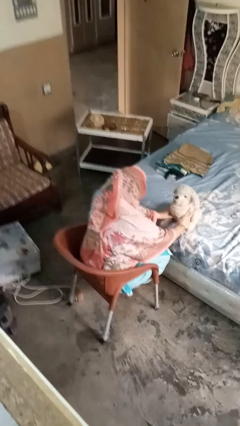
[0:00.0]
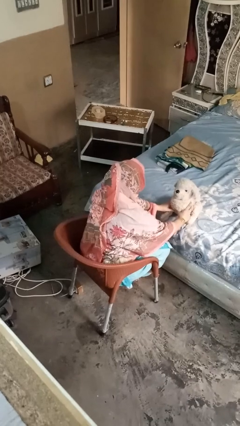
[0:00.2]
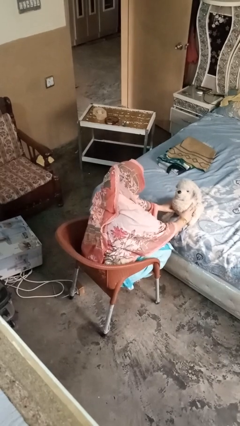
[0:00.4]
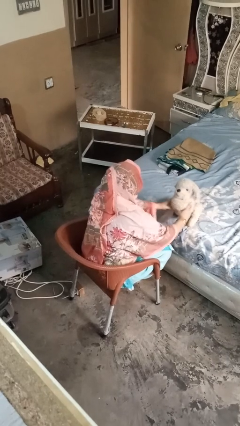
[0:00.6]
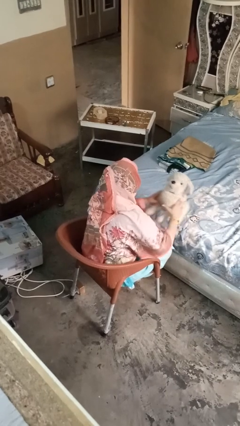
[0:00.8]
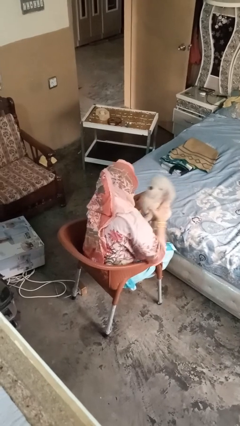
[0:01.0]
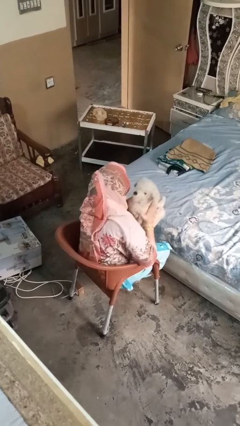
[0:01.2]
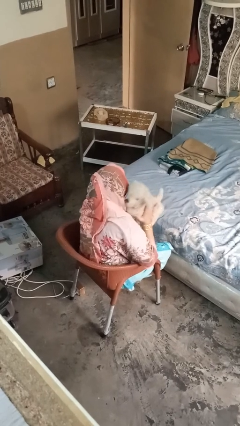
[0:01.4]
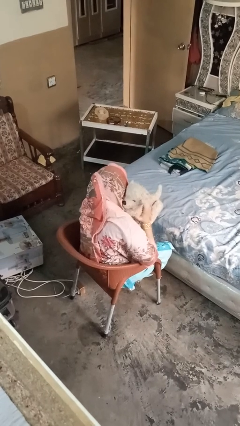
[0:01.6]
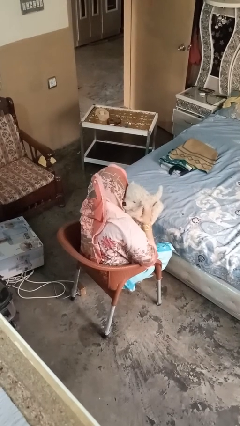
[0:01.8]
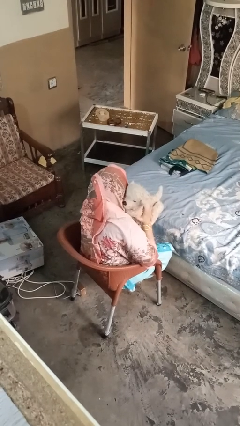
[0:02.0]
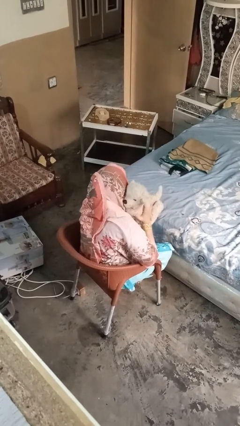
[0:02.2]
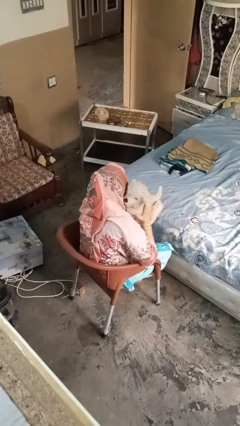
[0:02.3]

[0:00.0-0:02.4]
person hugs stuffed animal

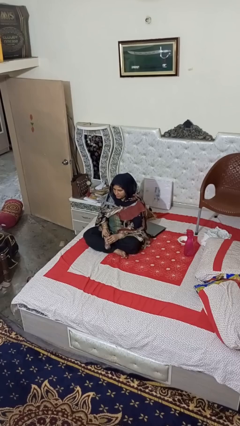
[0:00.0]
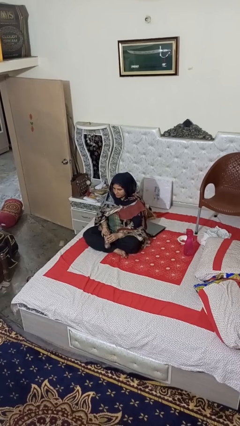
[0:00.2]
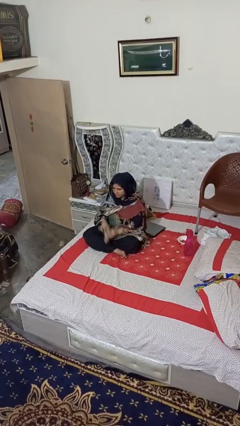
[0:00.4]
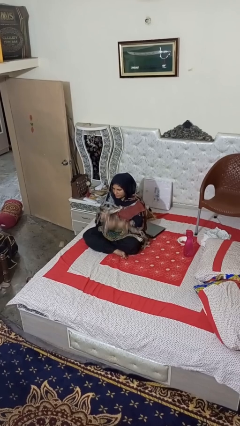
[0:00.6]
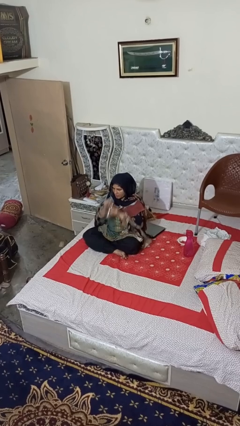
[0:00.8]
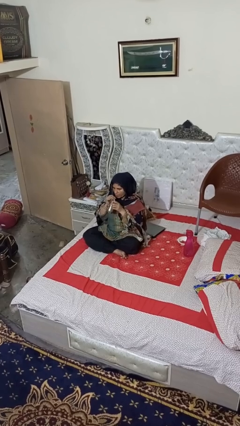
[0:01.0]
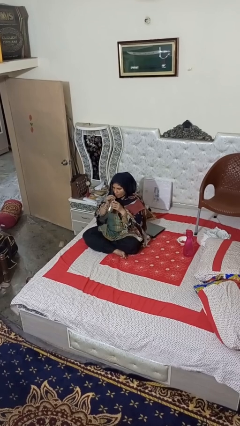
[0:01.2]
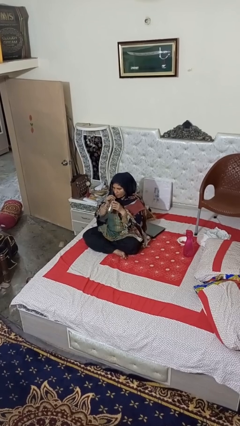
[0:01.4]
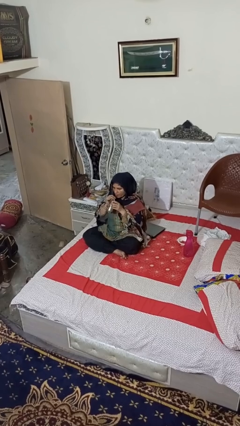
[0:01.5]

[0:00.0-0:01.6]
person drinks from straw

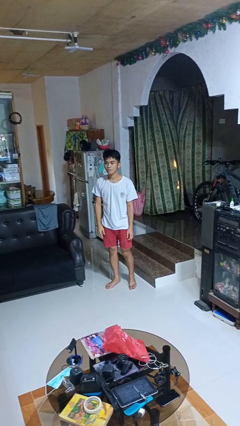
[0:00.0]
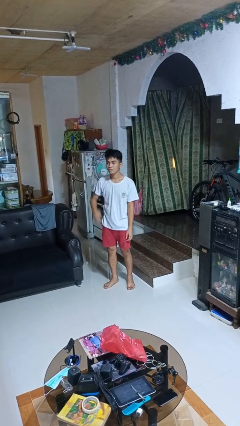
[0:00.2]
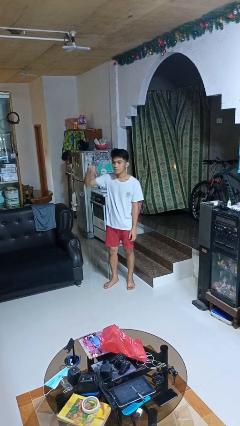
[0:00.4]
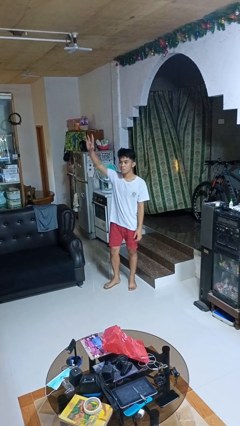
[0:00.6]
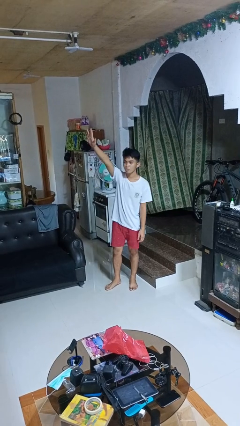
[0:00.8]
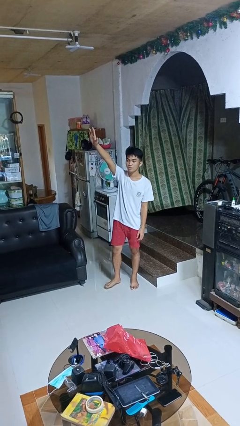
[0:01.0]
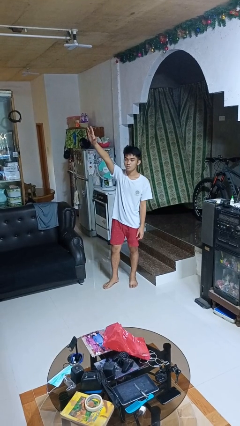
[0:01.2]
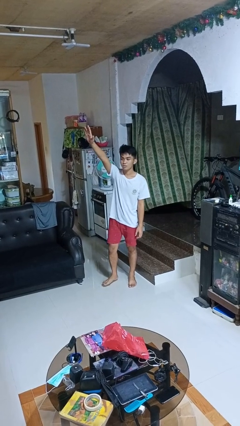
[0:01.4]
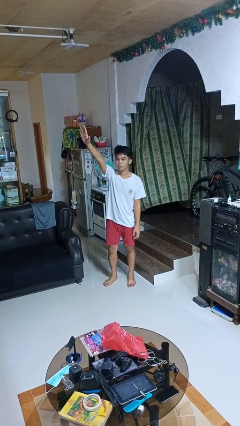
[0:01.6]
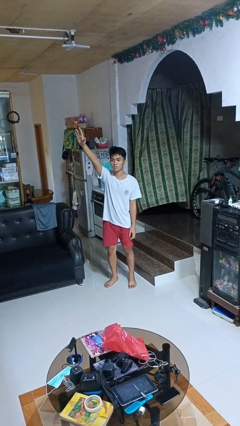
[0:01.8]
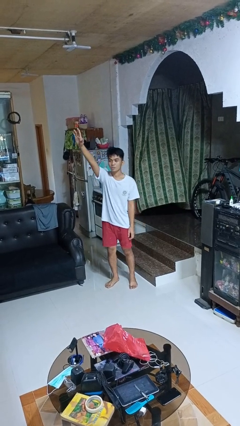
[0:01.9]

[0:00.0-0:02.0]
person gestures raise hand

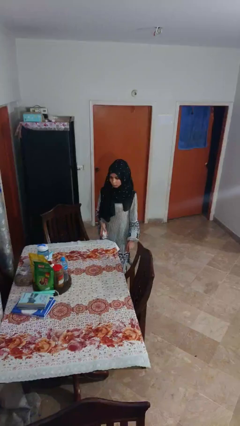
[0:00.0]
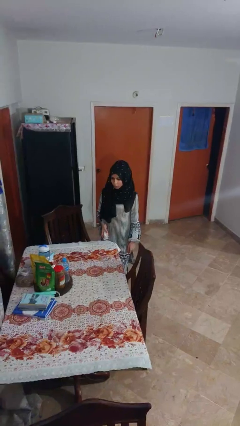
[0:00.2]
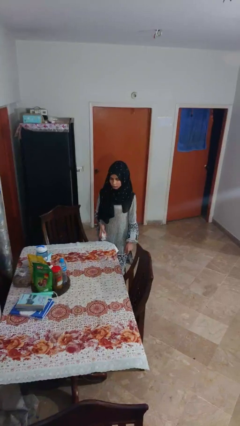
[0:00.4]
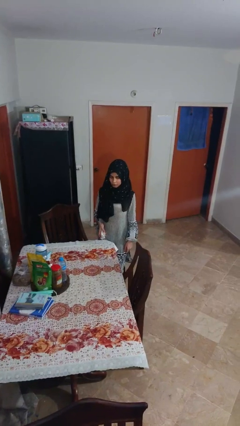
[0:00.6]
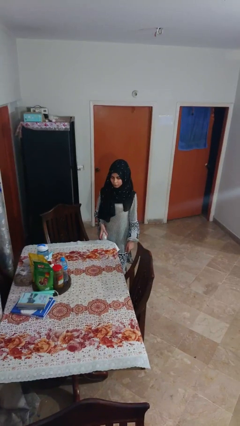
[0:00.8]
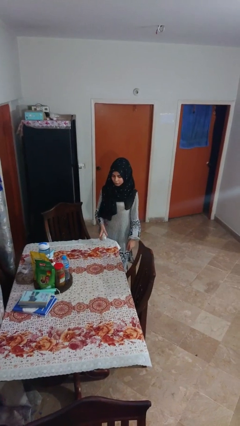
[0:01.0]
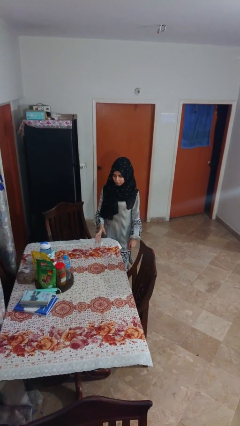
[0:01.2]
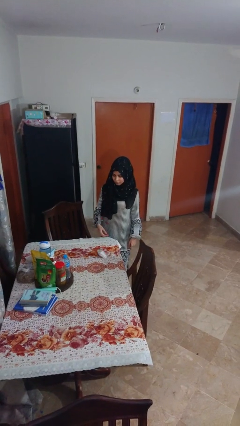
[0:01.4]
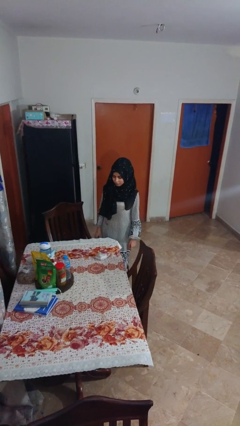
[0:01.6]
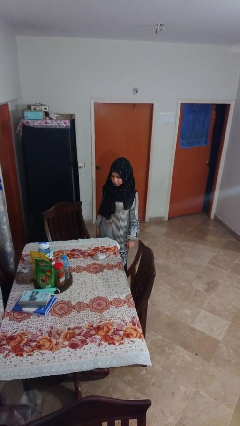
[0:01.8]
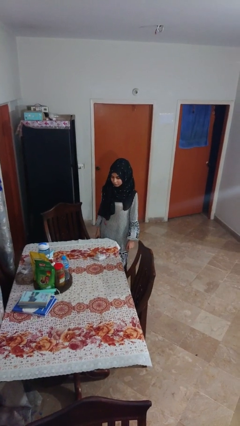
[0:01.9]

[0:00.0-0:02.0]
person throws object on table

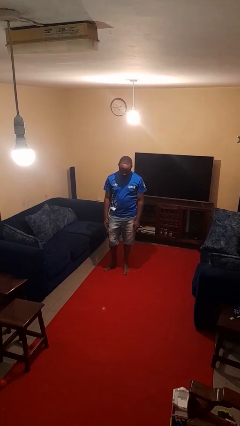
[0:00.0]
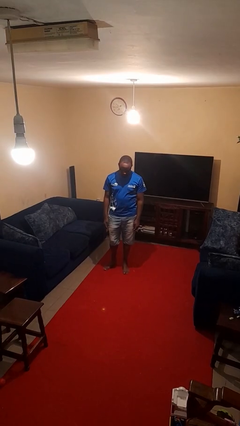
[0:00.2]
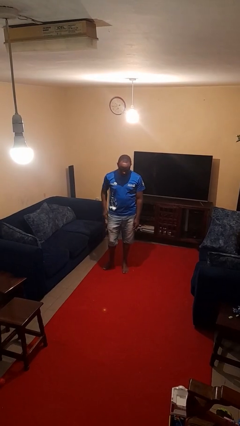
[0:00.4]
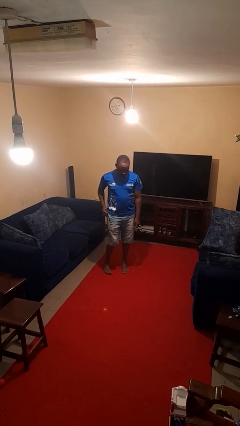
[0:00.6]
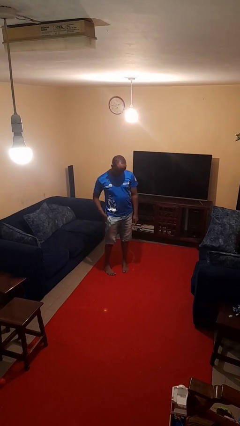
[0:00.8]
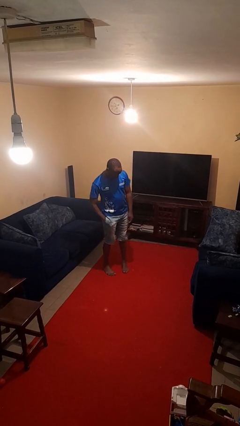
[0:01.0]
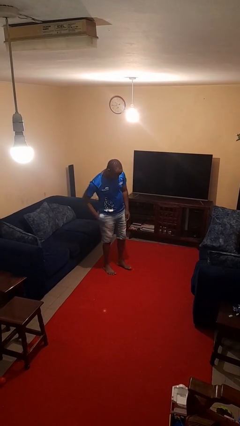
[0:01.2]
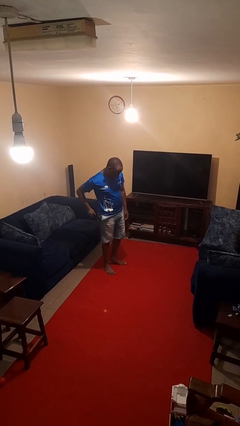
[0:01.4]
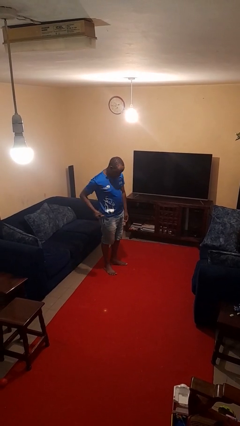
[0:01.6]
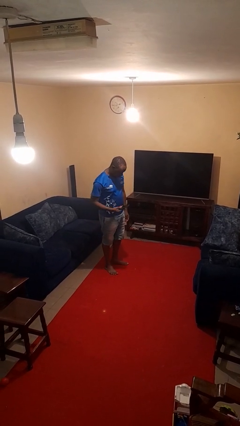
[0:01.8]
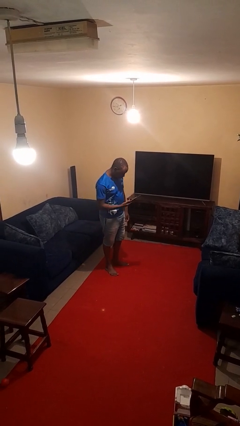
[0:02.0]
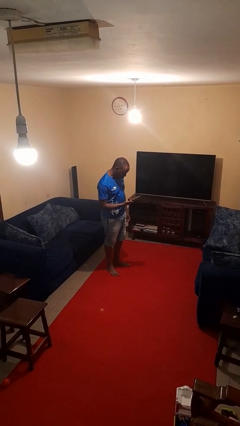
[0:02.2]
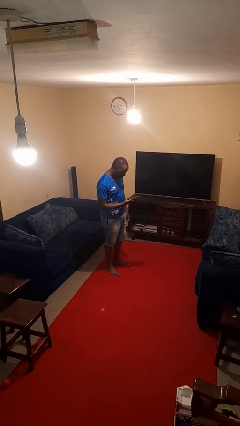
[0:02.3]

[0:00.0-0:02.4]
person takes phone from pocket

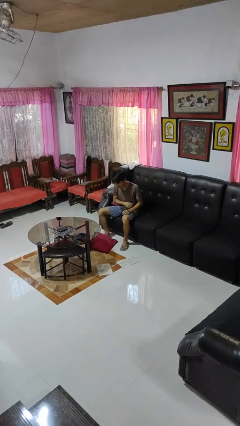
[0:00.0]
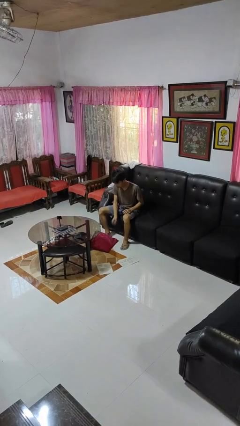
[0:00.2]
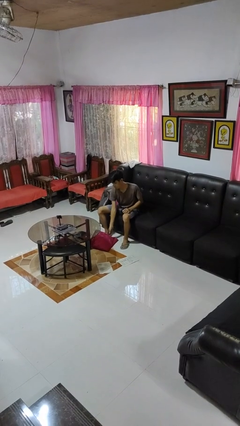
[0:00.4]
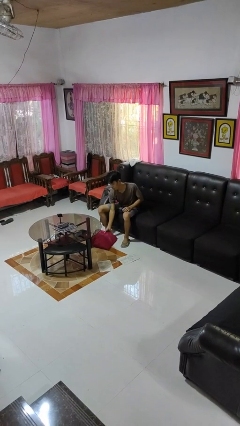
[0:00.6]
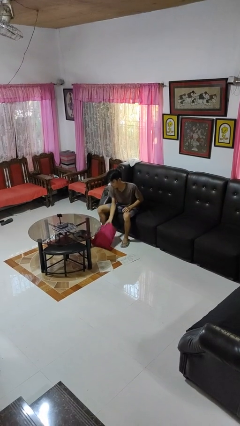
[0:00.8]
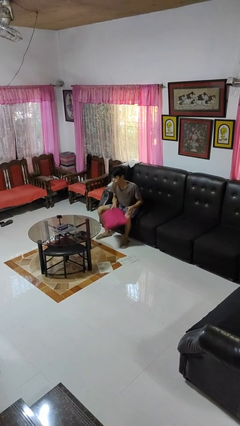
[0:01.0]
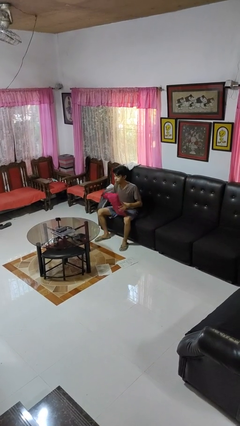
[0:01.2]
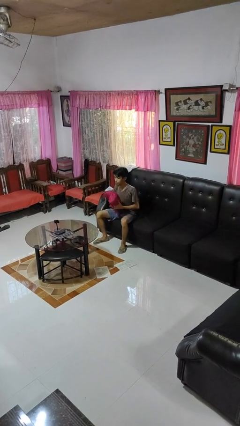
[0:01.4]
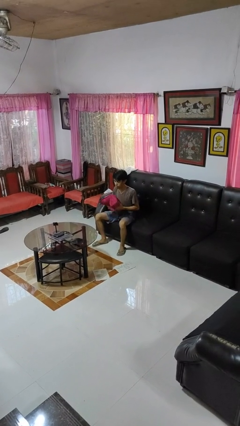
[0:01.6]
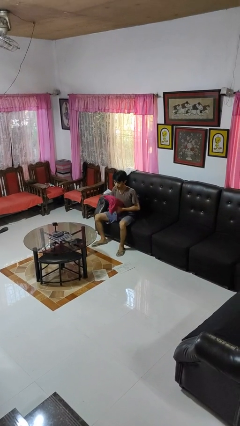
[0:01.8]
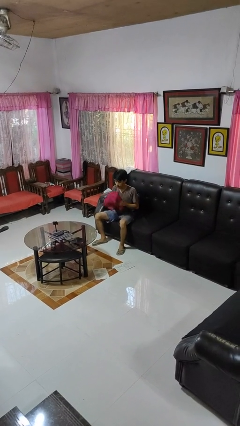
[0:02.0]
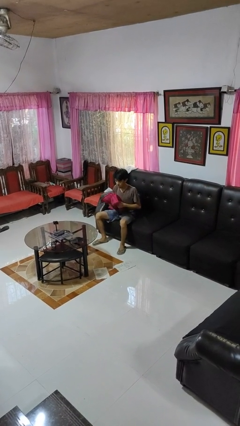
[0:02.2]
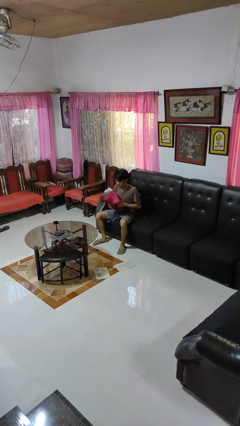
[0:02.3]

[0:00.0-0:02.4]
person picks up object from floor

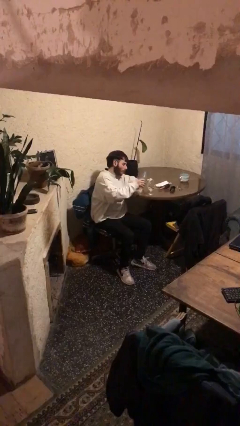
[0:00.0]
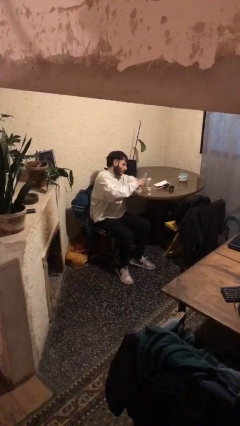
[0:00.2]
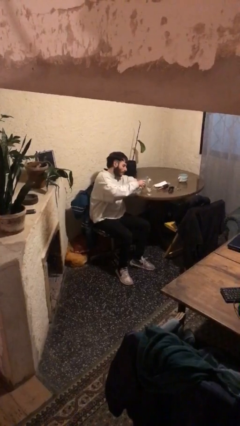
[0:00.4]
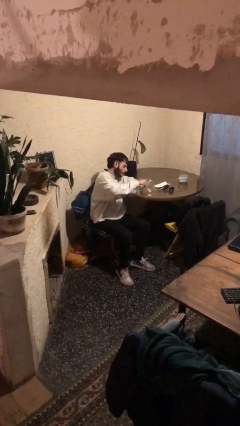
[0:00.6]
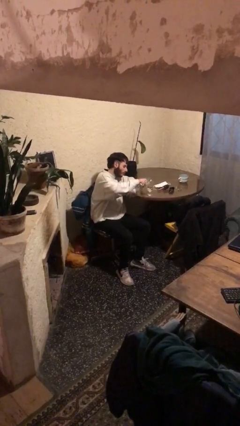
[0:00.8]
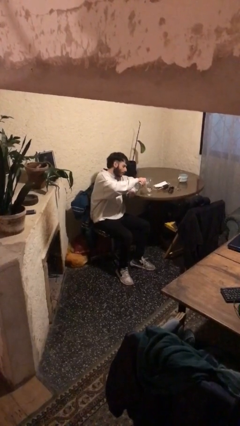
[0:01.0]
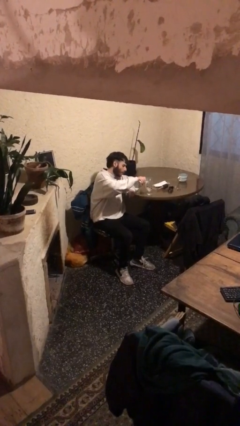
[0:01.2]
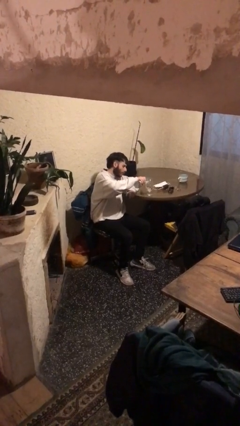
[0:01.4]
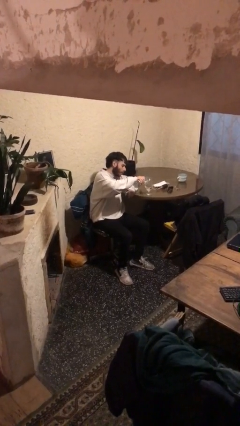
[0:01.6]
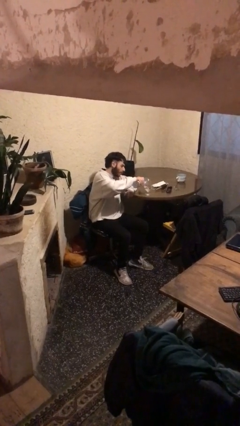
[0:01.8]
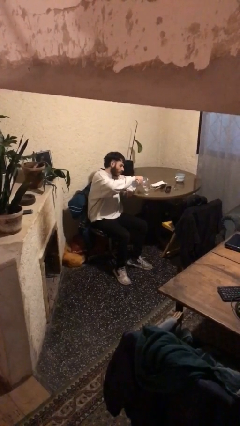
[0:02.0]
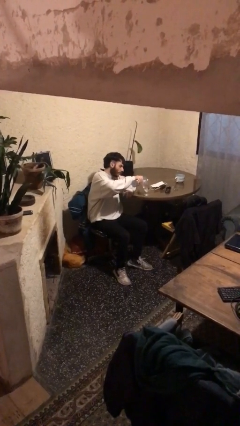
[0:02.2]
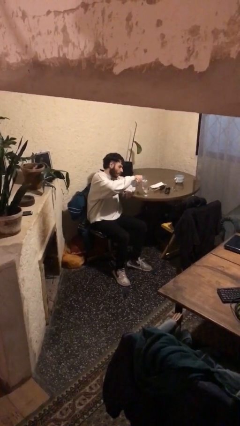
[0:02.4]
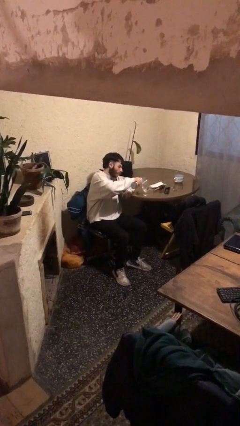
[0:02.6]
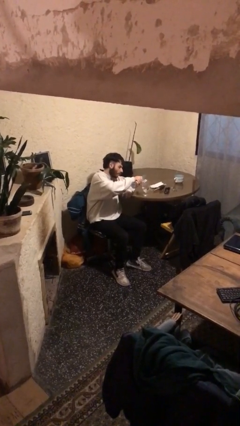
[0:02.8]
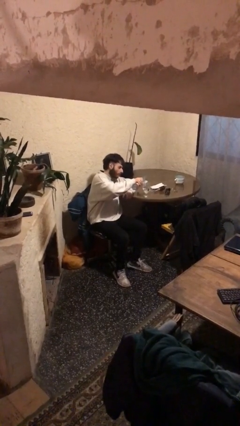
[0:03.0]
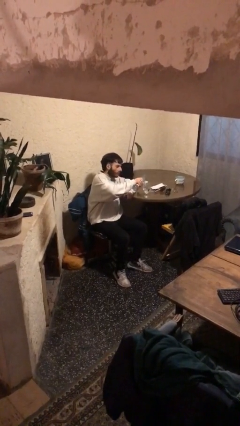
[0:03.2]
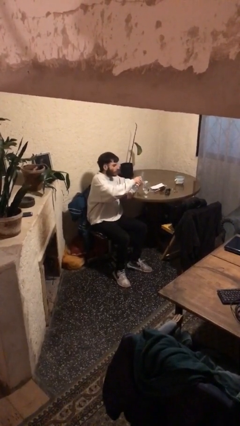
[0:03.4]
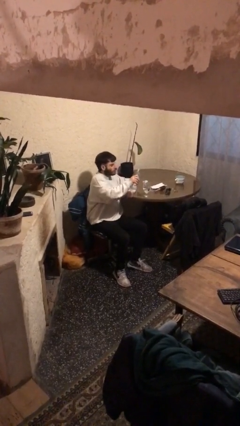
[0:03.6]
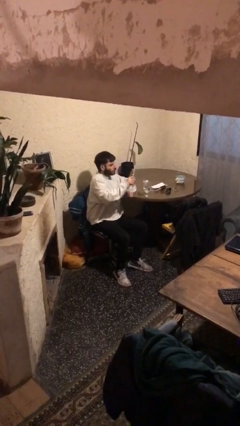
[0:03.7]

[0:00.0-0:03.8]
person pours liquid into cup

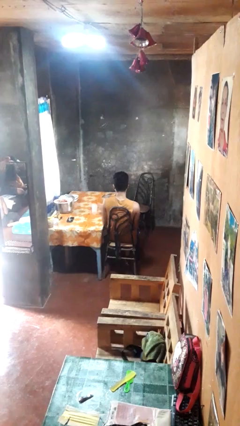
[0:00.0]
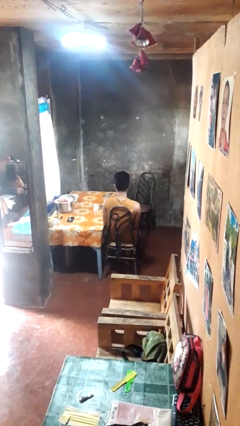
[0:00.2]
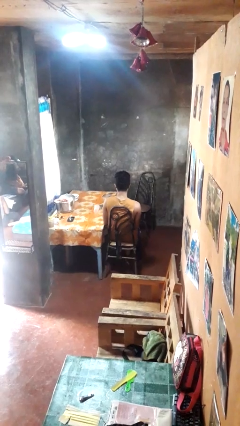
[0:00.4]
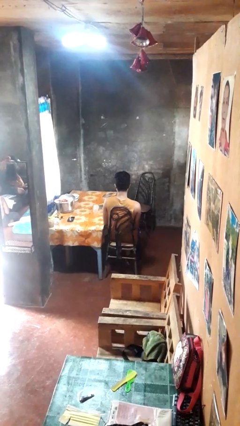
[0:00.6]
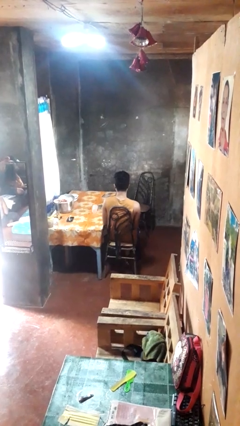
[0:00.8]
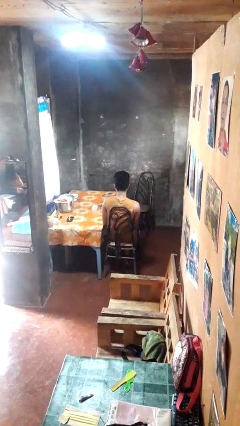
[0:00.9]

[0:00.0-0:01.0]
person knocks over glass
